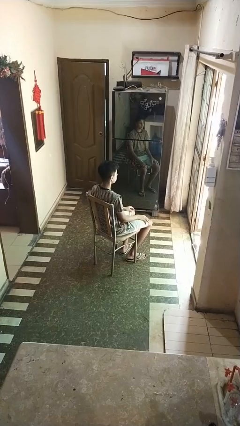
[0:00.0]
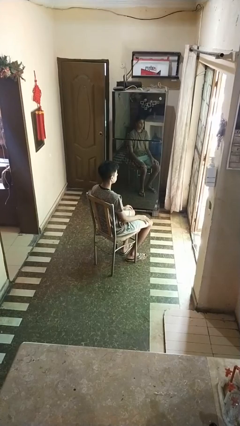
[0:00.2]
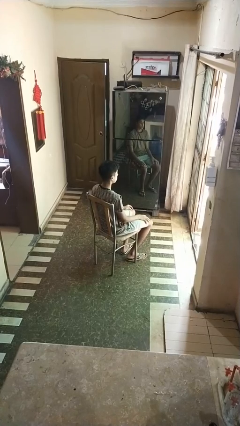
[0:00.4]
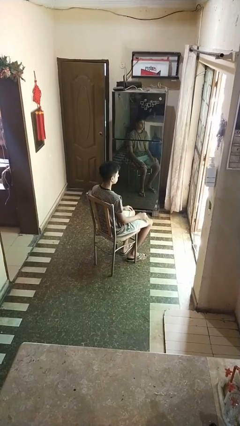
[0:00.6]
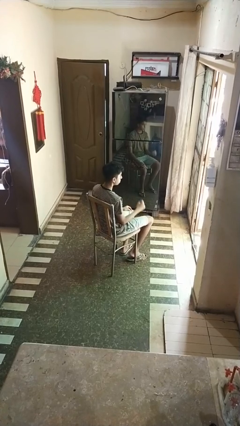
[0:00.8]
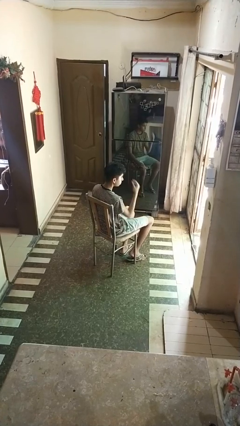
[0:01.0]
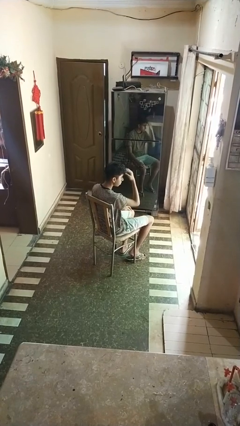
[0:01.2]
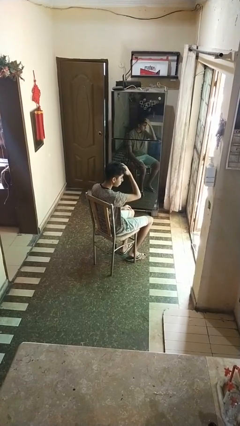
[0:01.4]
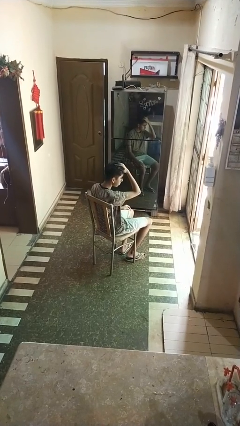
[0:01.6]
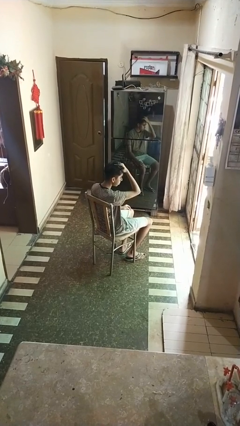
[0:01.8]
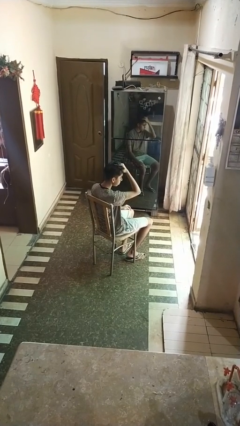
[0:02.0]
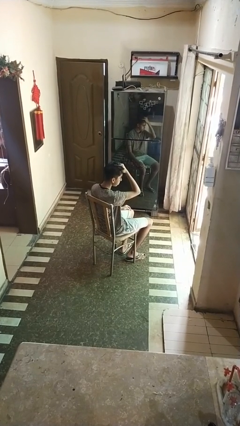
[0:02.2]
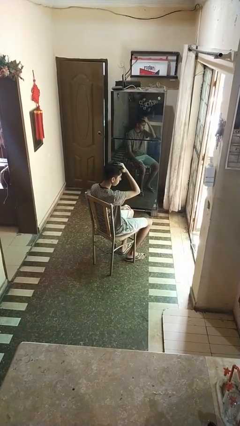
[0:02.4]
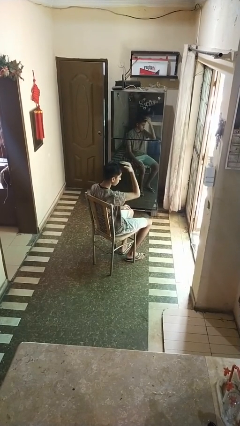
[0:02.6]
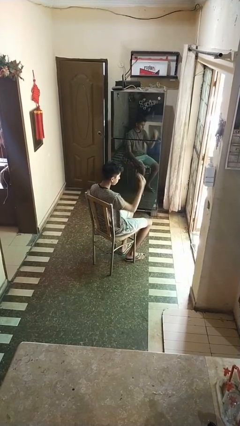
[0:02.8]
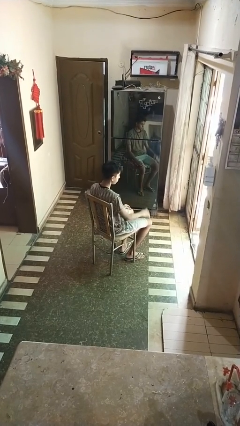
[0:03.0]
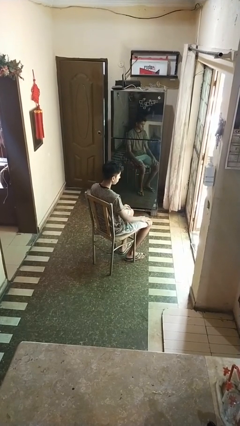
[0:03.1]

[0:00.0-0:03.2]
person strokes hair

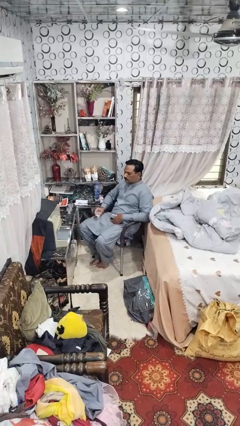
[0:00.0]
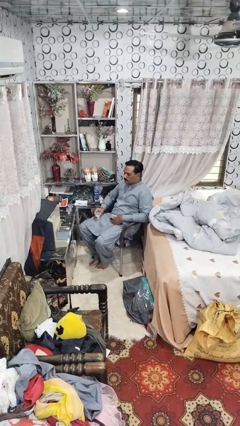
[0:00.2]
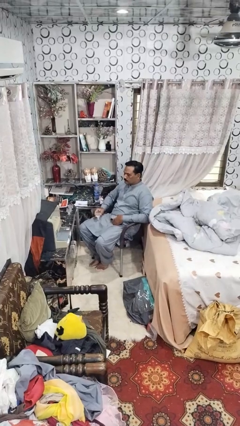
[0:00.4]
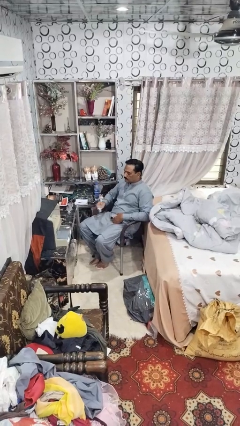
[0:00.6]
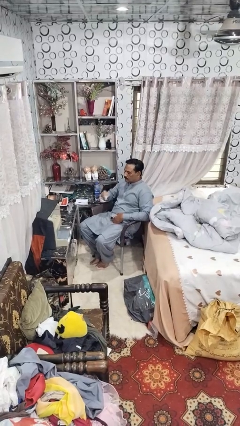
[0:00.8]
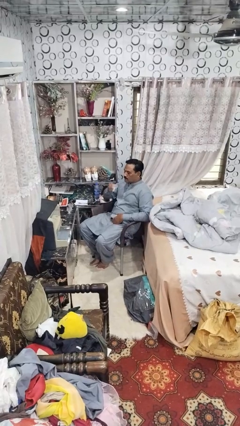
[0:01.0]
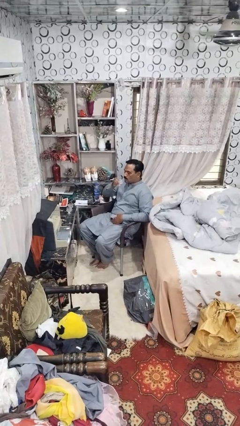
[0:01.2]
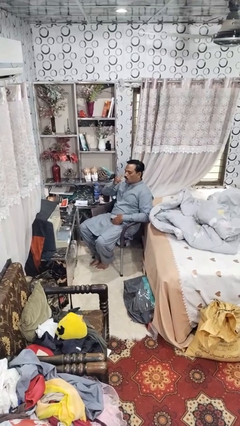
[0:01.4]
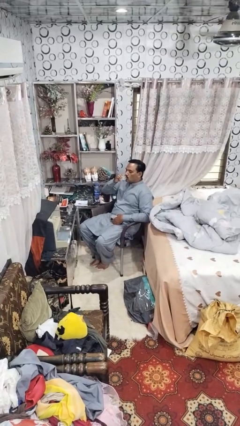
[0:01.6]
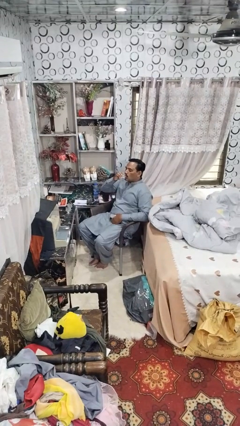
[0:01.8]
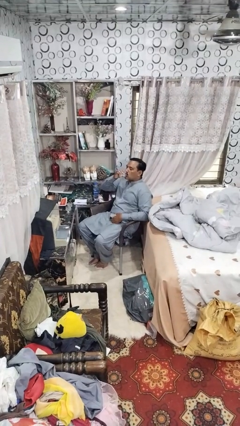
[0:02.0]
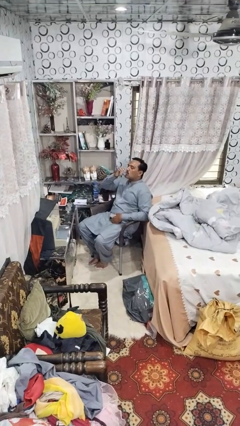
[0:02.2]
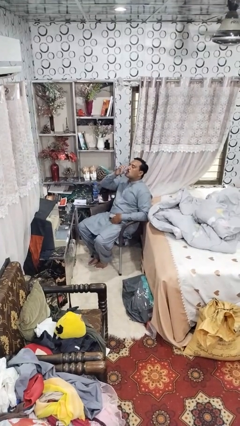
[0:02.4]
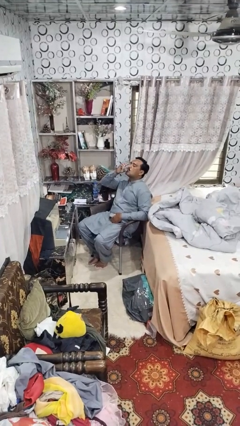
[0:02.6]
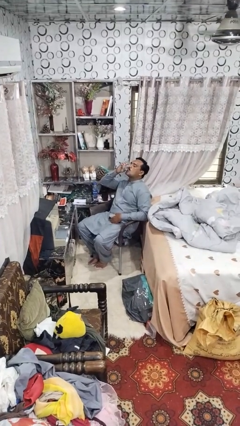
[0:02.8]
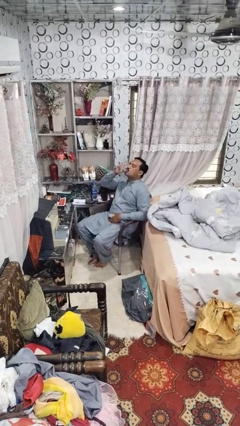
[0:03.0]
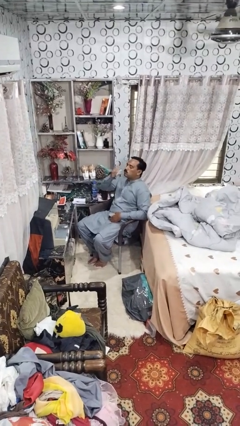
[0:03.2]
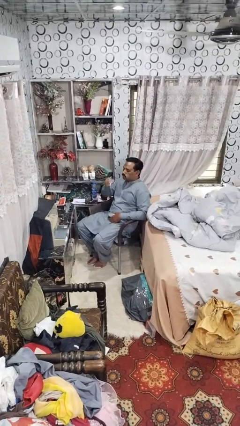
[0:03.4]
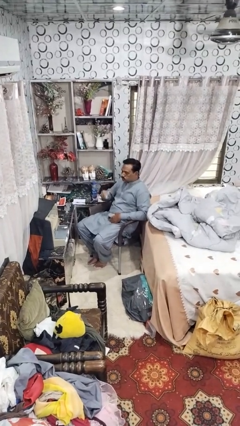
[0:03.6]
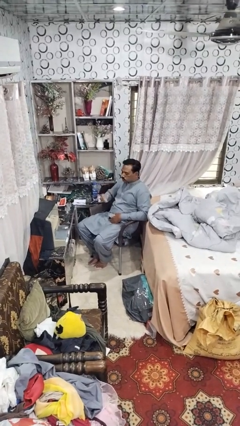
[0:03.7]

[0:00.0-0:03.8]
person drinks from shotglass

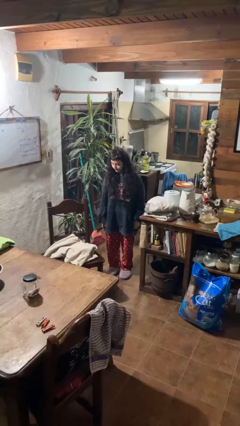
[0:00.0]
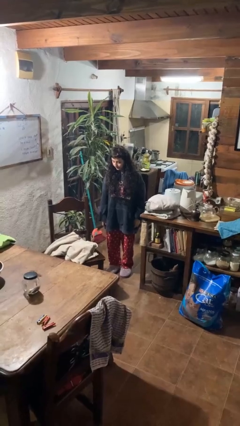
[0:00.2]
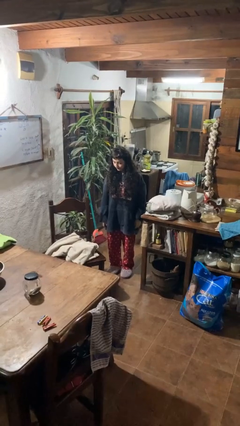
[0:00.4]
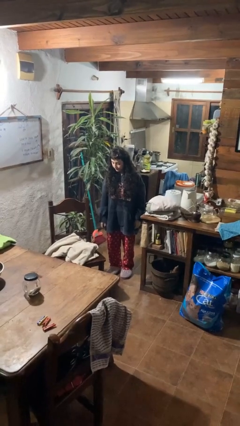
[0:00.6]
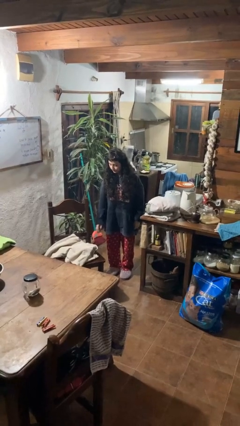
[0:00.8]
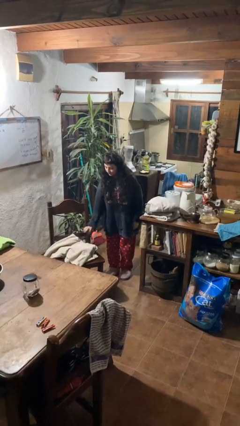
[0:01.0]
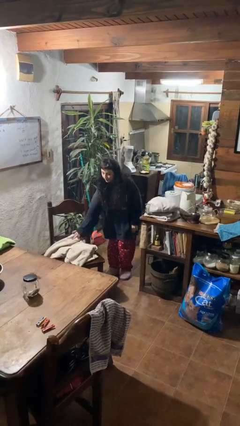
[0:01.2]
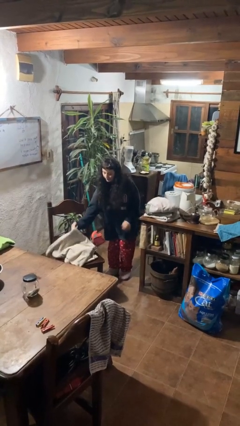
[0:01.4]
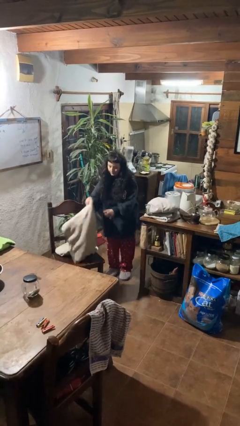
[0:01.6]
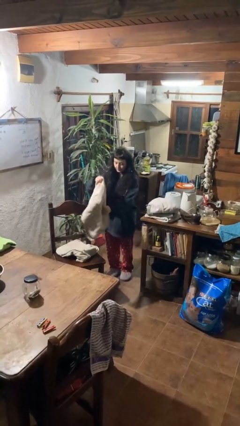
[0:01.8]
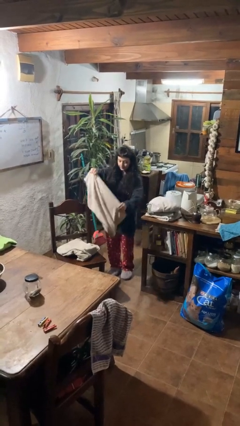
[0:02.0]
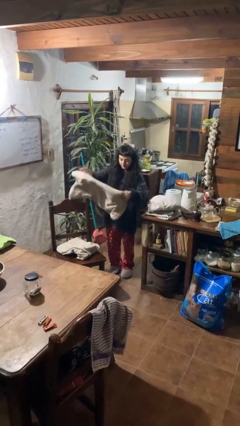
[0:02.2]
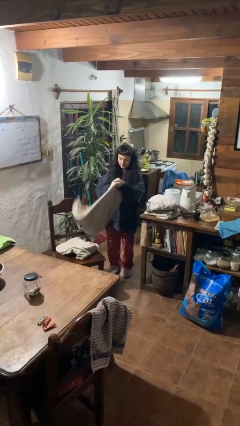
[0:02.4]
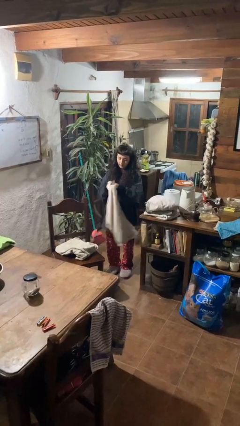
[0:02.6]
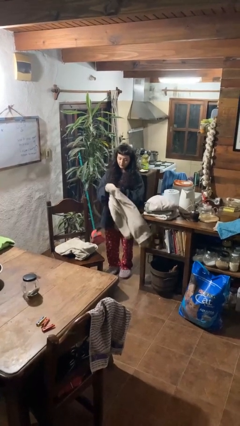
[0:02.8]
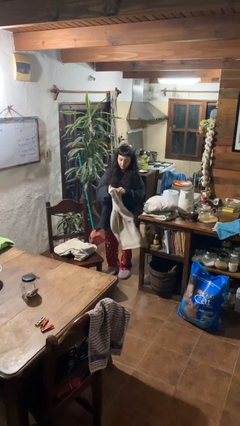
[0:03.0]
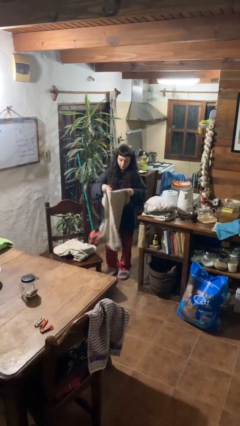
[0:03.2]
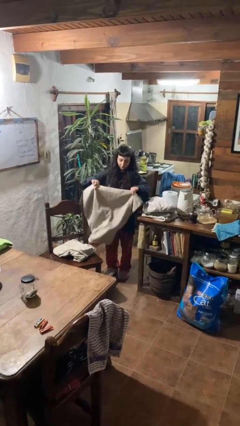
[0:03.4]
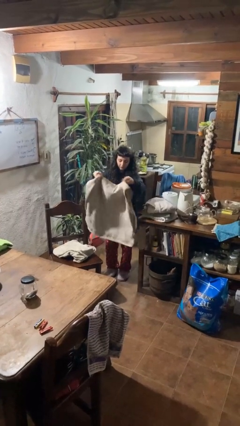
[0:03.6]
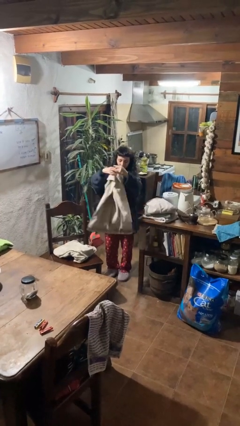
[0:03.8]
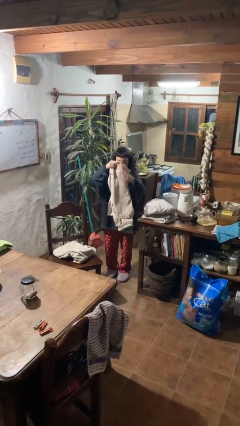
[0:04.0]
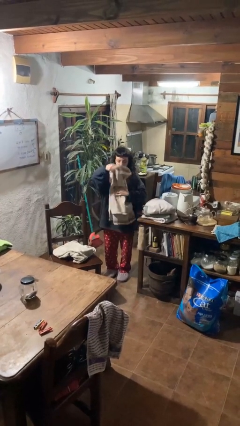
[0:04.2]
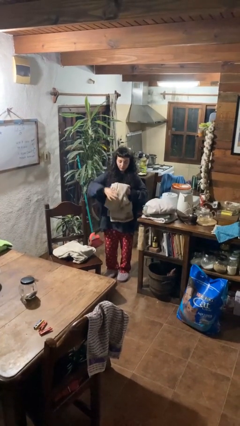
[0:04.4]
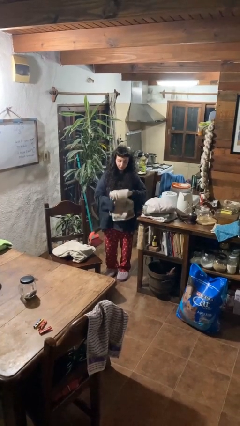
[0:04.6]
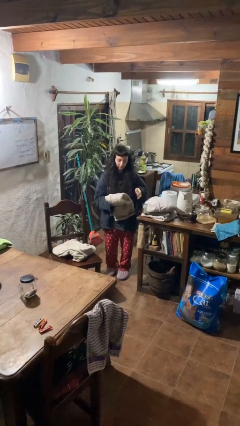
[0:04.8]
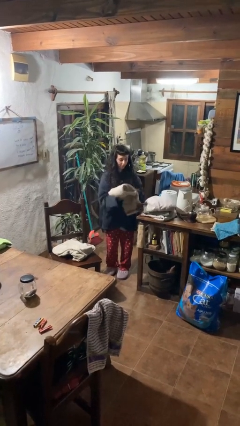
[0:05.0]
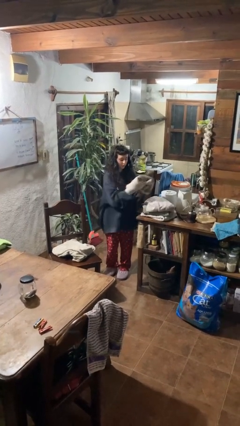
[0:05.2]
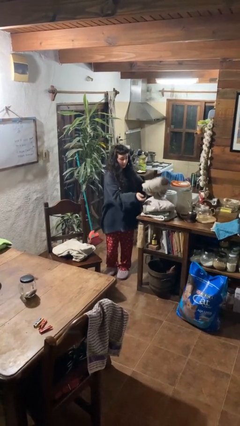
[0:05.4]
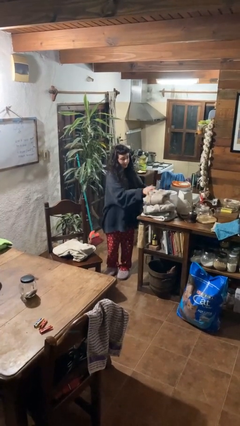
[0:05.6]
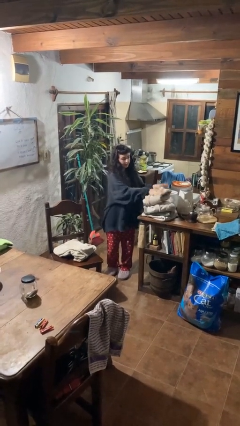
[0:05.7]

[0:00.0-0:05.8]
person folds towel

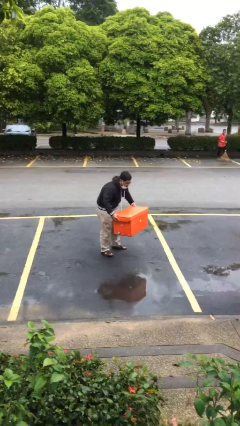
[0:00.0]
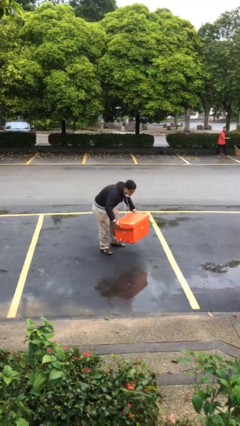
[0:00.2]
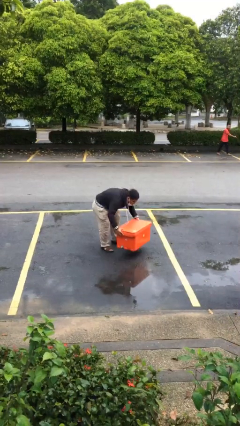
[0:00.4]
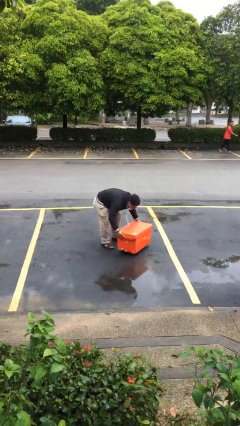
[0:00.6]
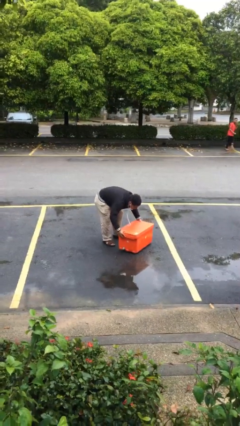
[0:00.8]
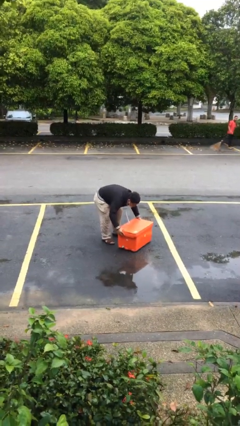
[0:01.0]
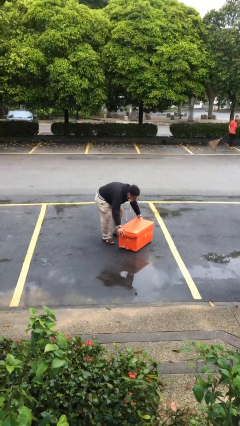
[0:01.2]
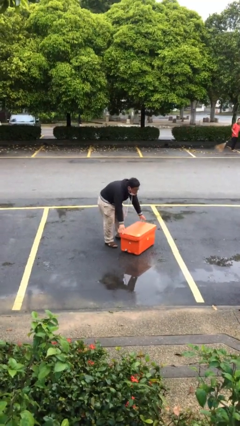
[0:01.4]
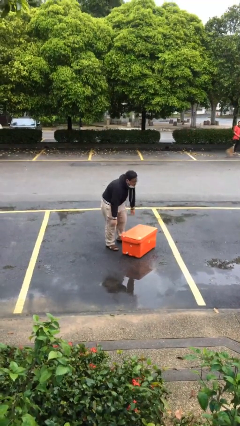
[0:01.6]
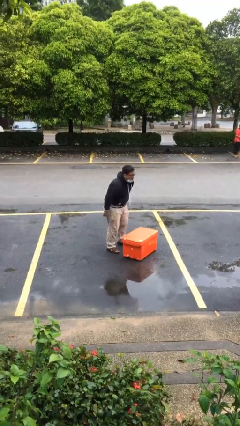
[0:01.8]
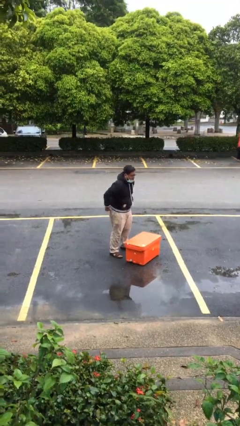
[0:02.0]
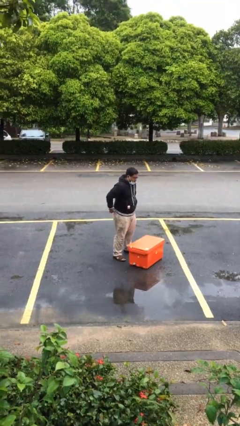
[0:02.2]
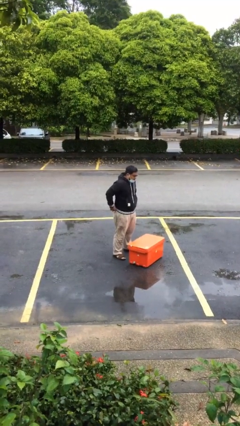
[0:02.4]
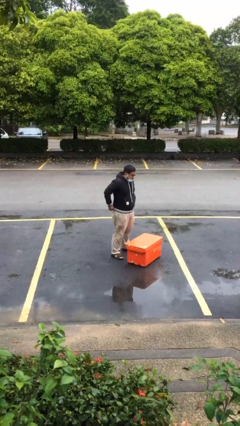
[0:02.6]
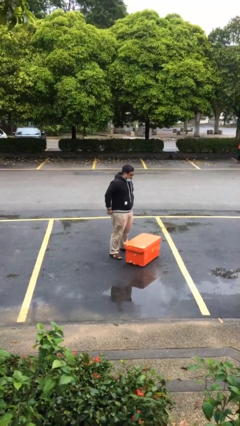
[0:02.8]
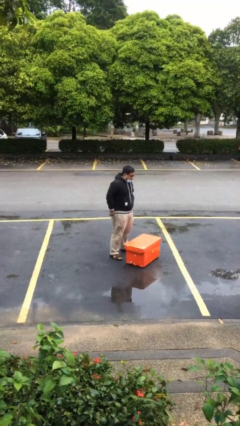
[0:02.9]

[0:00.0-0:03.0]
person puts down object on floor

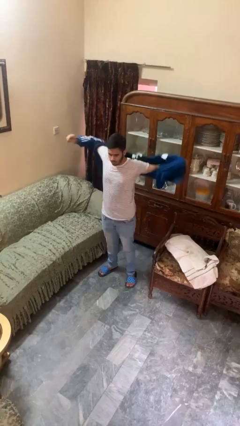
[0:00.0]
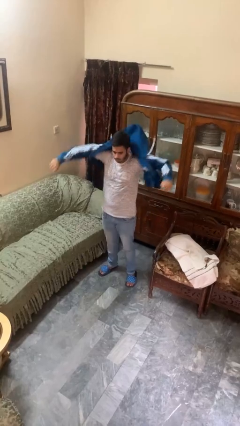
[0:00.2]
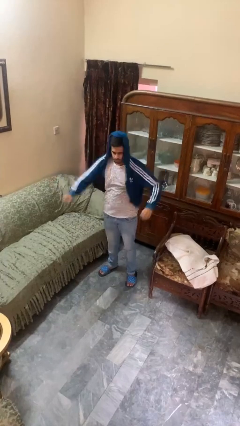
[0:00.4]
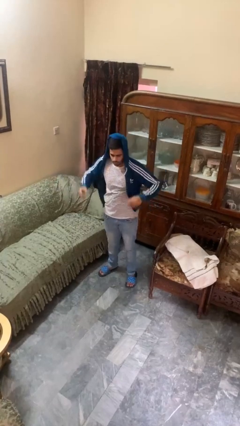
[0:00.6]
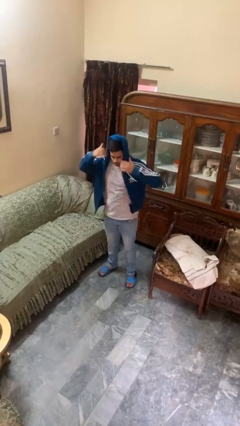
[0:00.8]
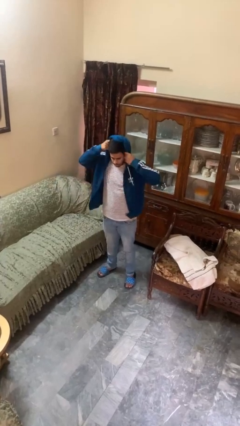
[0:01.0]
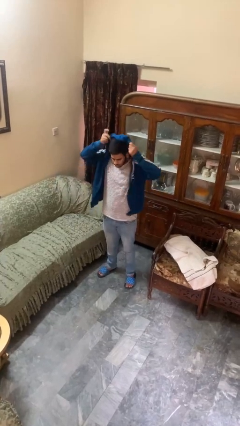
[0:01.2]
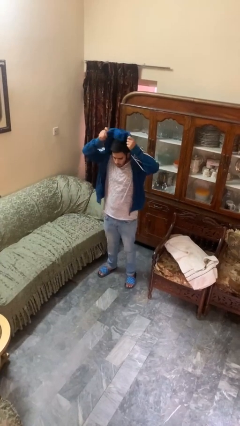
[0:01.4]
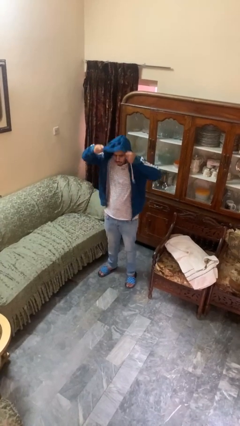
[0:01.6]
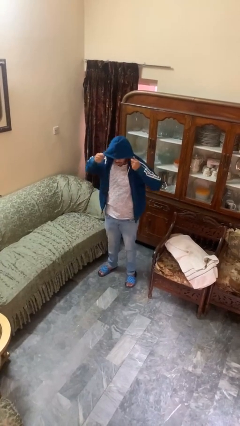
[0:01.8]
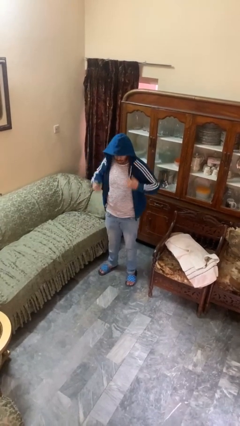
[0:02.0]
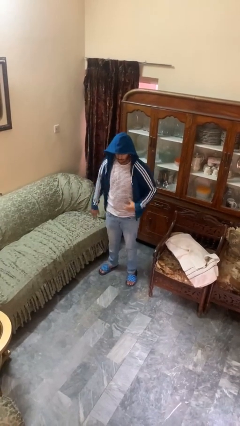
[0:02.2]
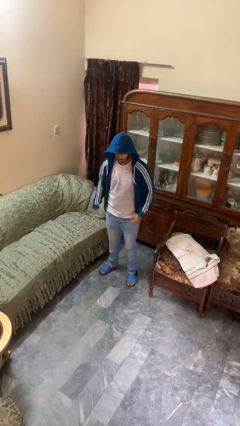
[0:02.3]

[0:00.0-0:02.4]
person puts on hoodie
